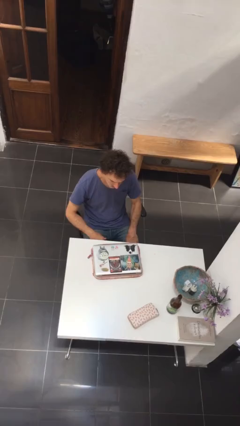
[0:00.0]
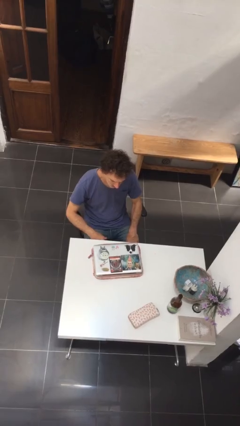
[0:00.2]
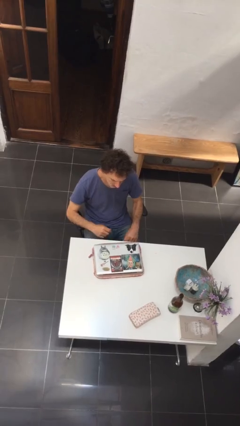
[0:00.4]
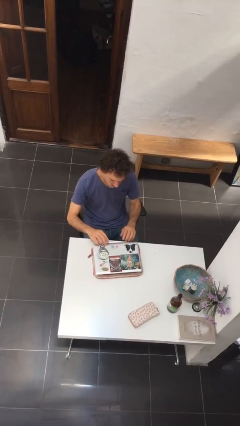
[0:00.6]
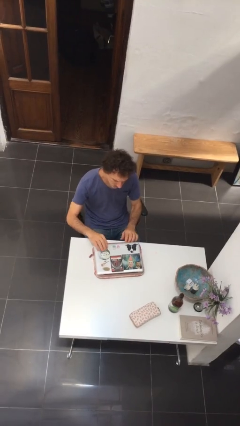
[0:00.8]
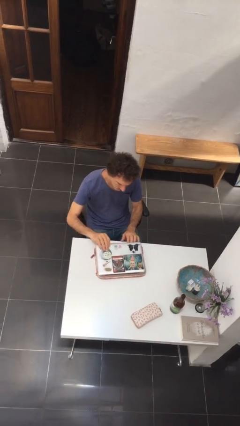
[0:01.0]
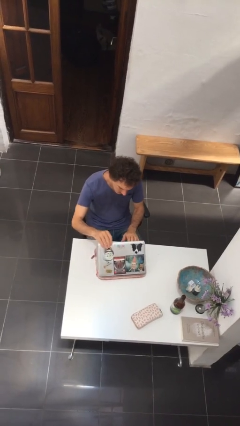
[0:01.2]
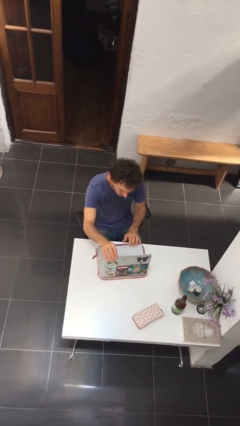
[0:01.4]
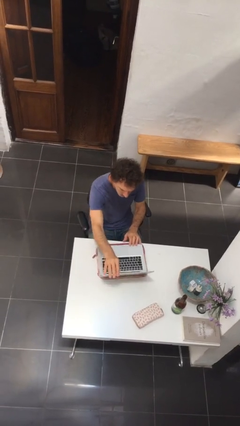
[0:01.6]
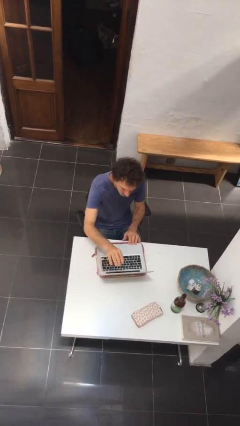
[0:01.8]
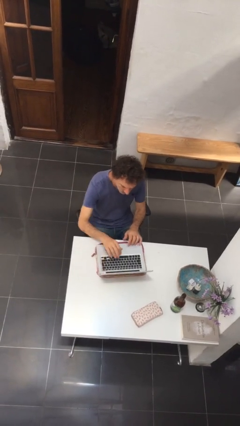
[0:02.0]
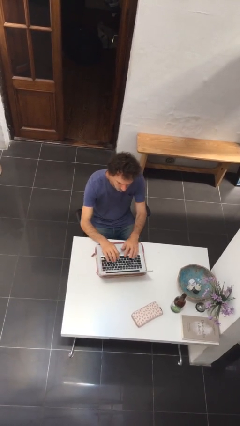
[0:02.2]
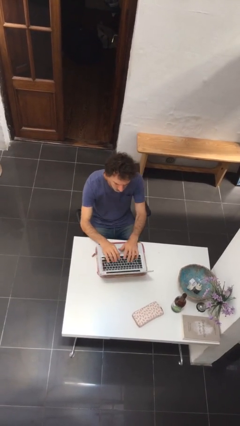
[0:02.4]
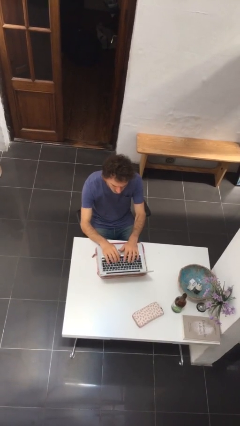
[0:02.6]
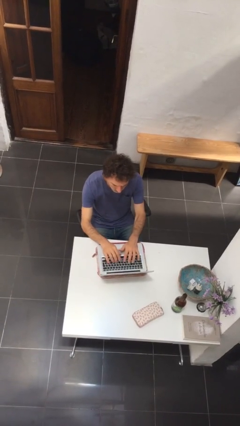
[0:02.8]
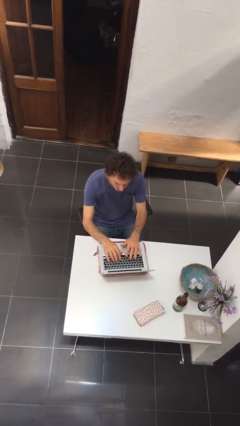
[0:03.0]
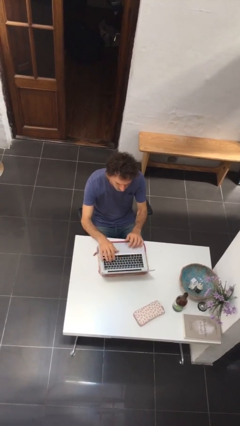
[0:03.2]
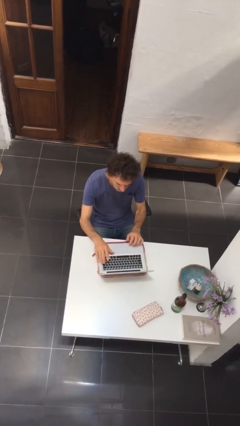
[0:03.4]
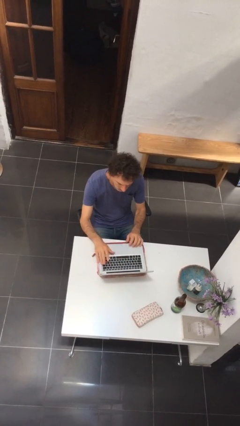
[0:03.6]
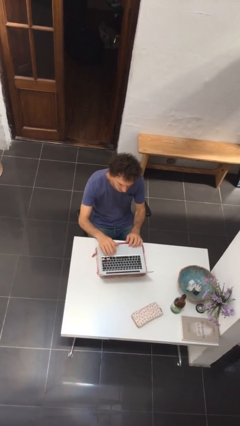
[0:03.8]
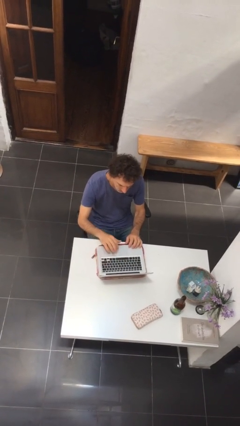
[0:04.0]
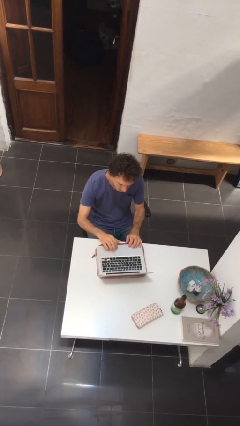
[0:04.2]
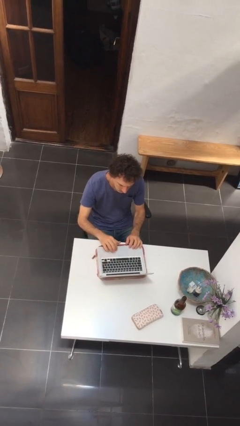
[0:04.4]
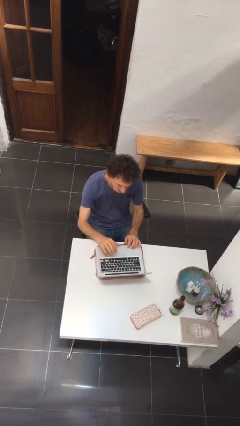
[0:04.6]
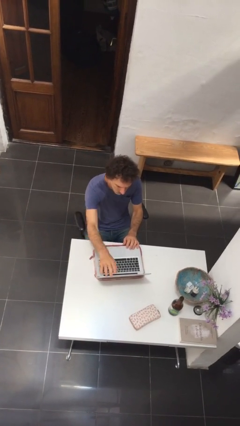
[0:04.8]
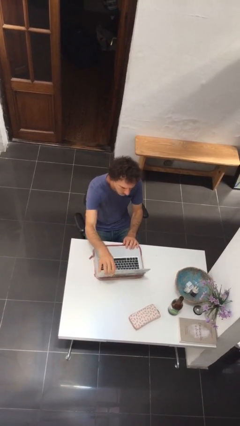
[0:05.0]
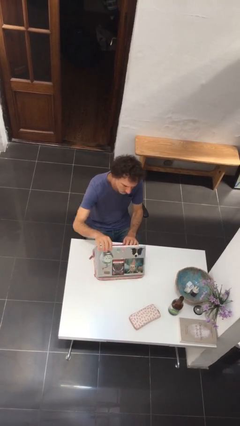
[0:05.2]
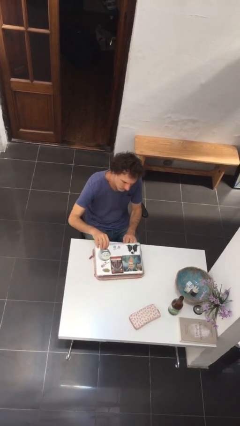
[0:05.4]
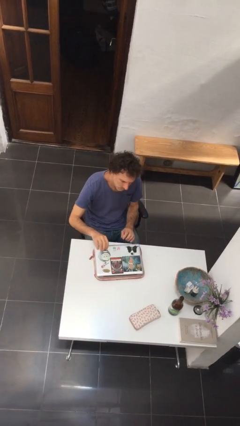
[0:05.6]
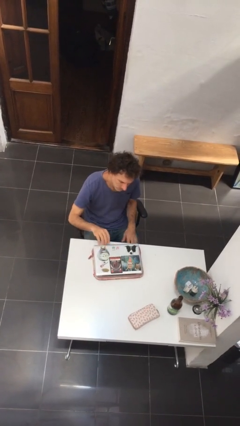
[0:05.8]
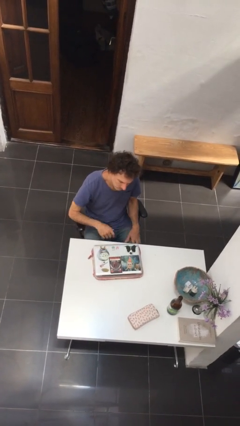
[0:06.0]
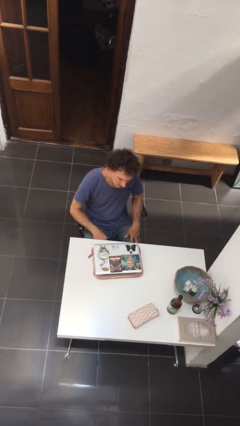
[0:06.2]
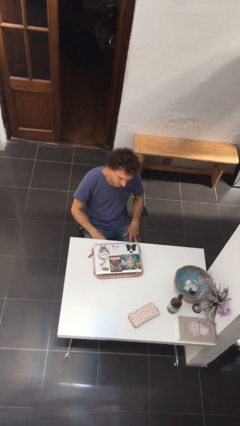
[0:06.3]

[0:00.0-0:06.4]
person interacts with laptop

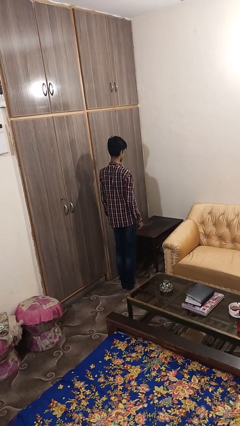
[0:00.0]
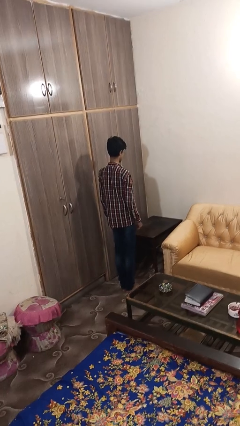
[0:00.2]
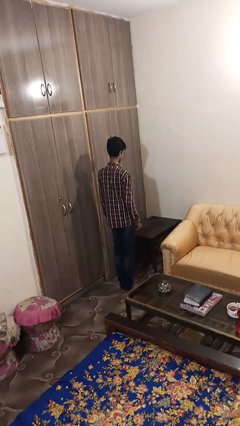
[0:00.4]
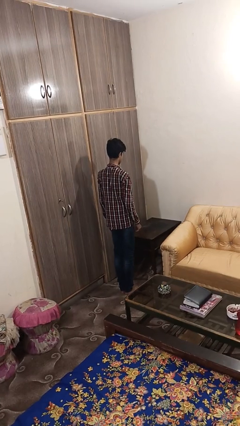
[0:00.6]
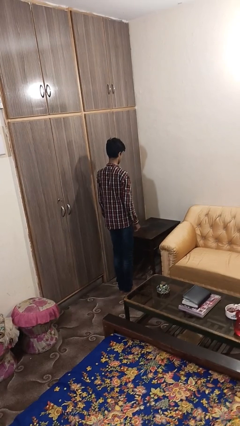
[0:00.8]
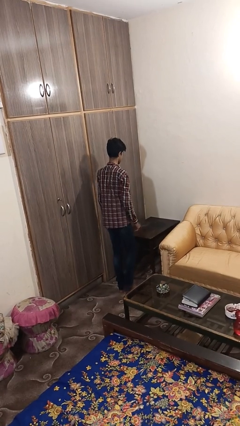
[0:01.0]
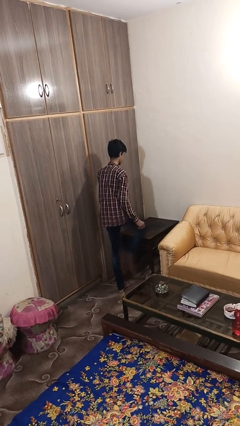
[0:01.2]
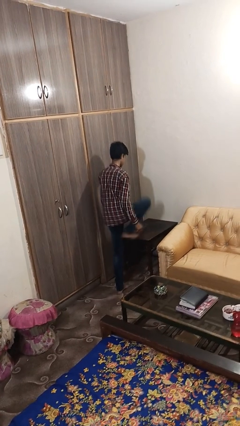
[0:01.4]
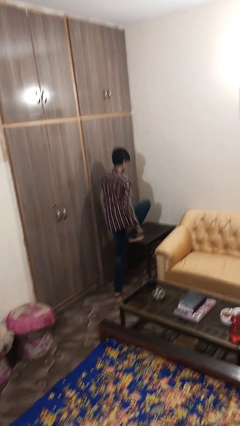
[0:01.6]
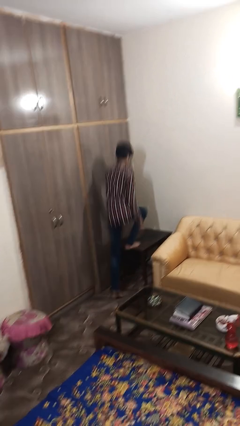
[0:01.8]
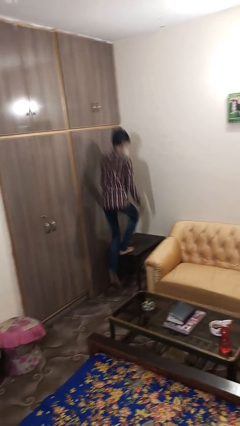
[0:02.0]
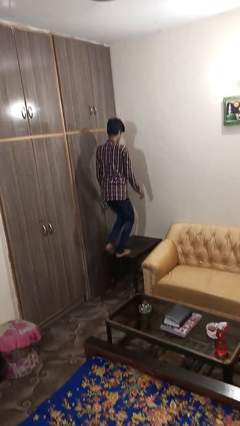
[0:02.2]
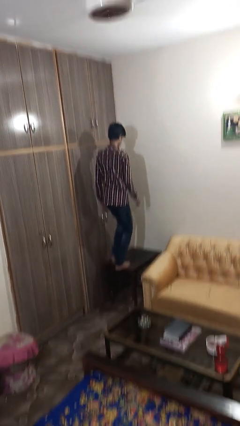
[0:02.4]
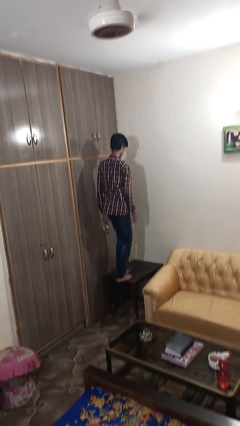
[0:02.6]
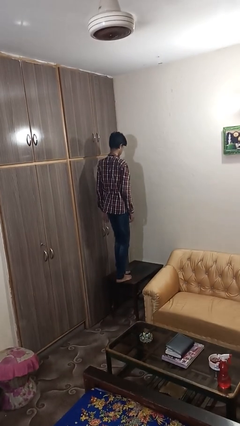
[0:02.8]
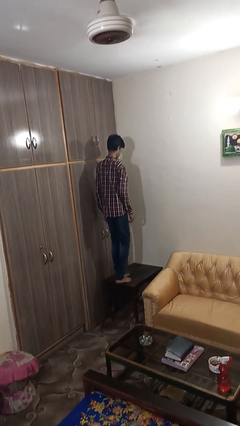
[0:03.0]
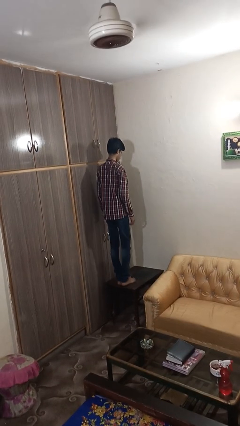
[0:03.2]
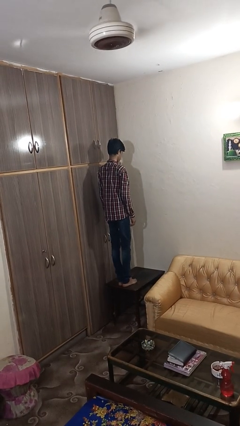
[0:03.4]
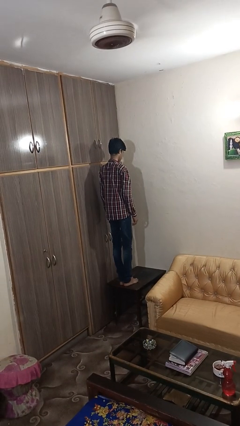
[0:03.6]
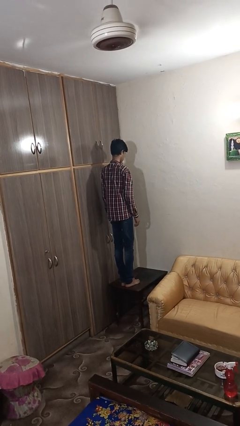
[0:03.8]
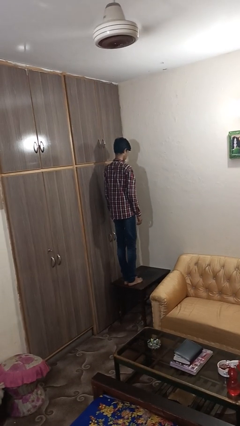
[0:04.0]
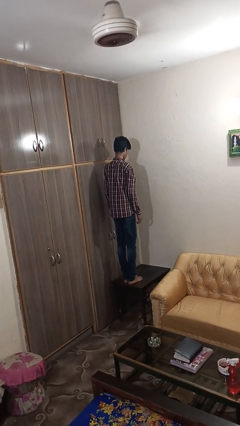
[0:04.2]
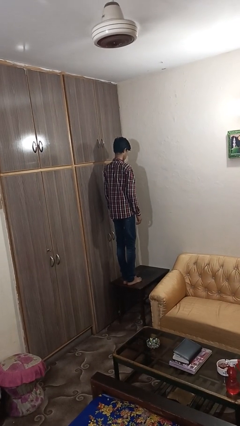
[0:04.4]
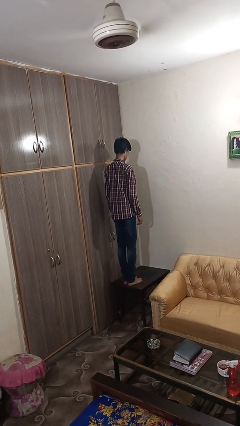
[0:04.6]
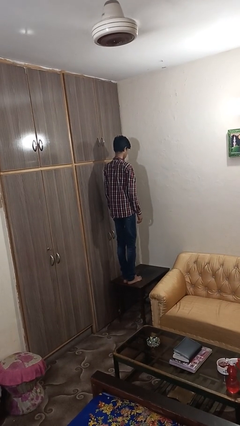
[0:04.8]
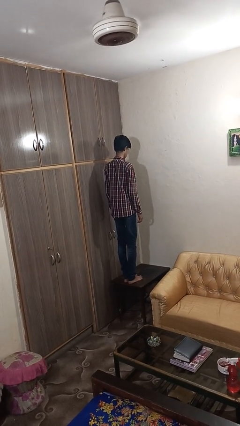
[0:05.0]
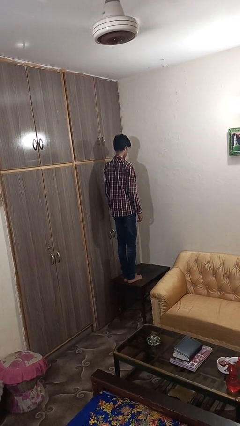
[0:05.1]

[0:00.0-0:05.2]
person climbs on table

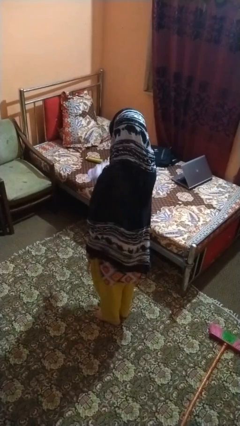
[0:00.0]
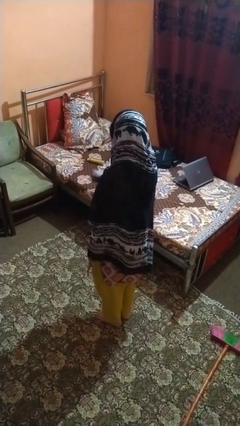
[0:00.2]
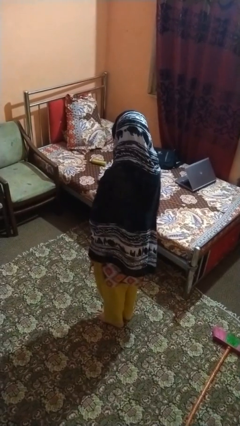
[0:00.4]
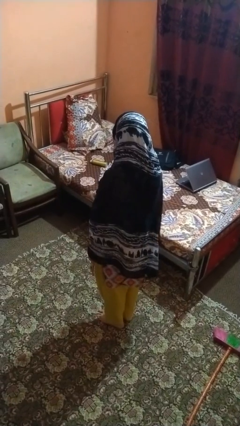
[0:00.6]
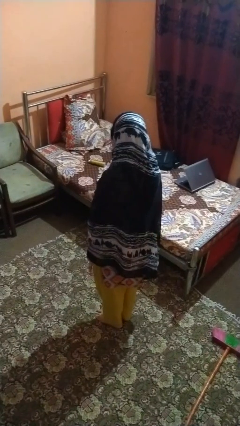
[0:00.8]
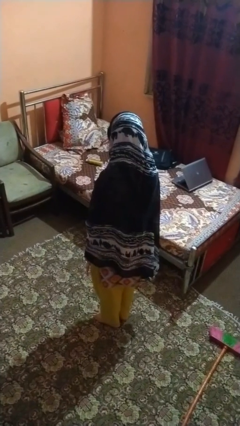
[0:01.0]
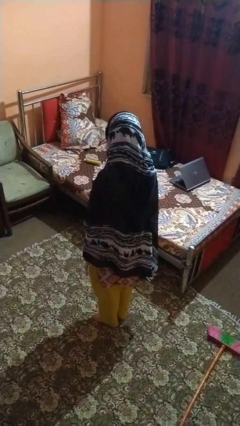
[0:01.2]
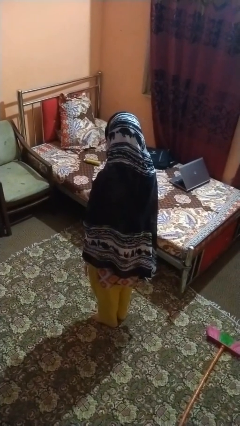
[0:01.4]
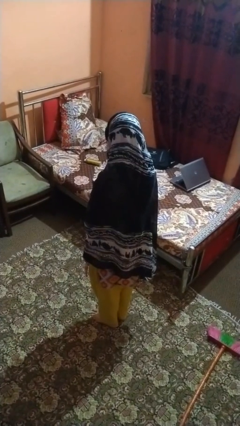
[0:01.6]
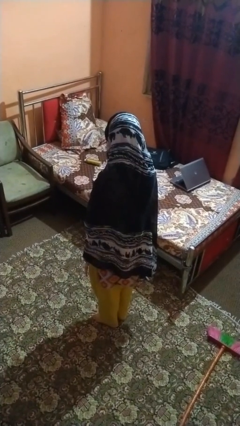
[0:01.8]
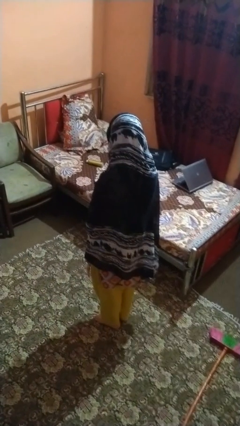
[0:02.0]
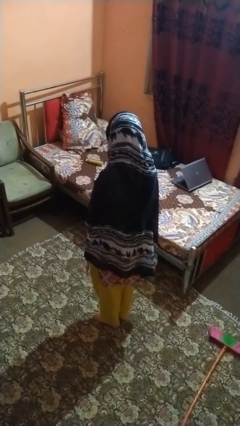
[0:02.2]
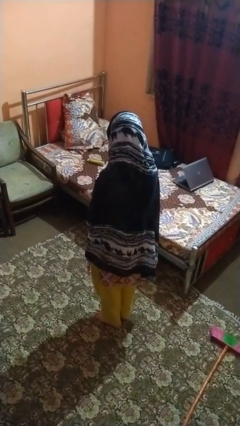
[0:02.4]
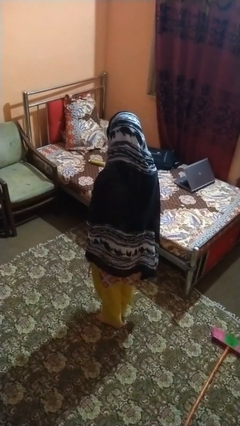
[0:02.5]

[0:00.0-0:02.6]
person throws object on bed

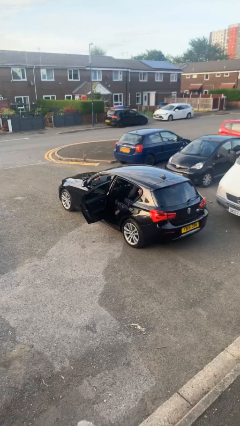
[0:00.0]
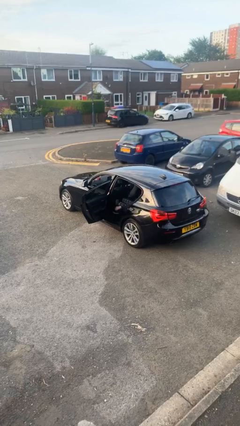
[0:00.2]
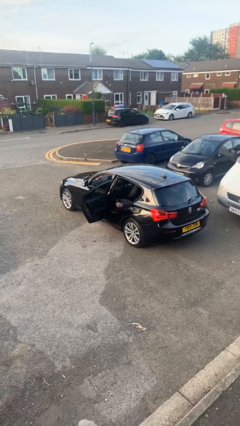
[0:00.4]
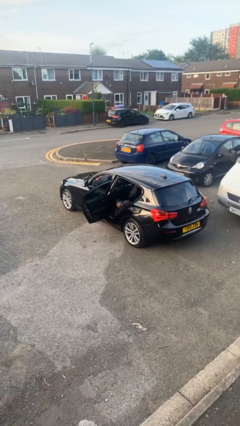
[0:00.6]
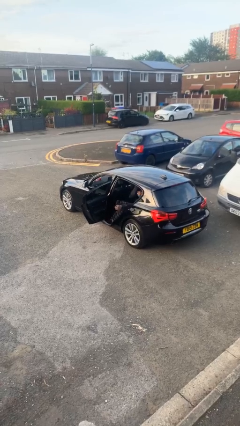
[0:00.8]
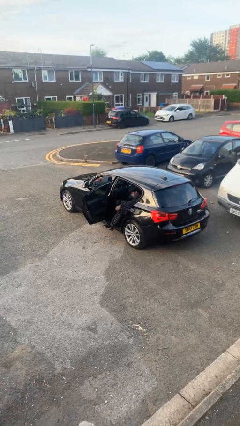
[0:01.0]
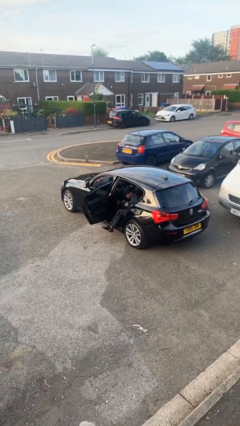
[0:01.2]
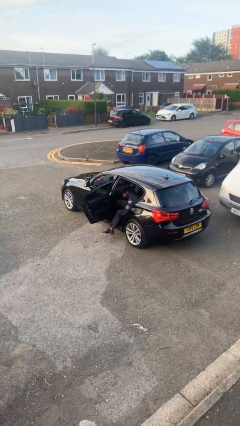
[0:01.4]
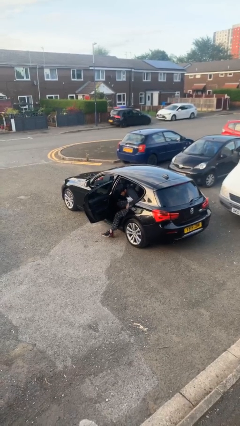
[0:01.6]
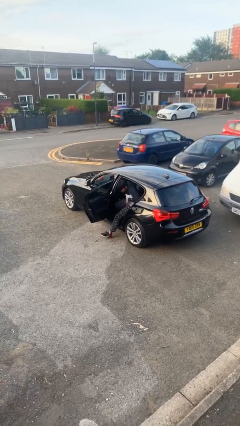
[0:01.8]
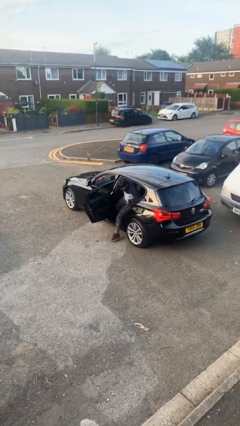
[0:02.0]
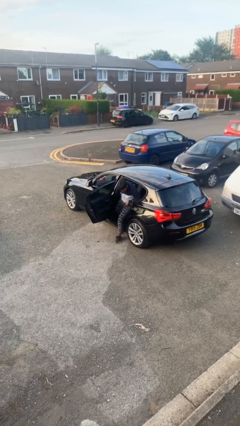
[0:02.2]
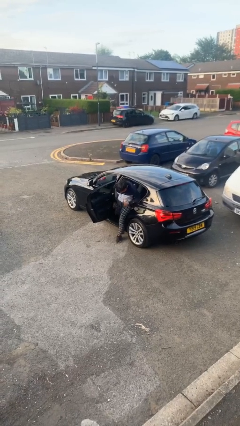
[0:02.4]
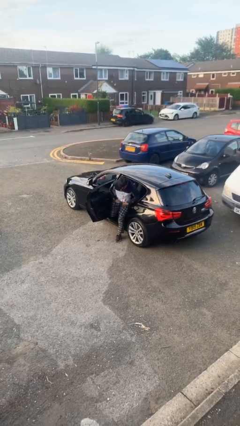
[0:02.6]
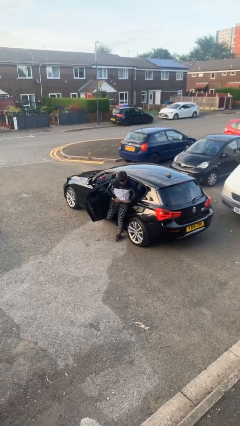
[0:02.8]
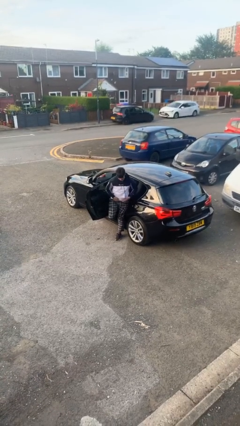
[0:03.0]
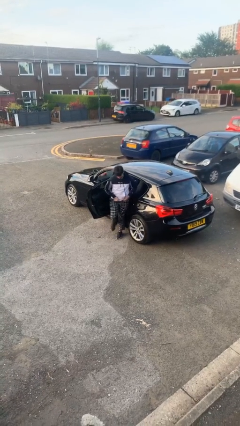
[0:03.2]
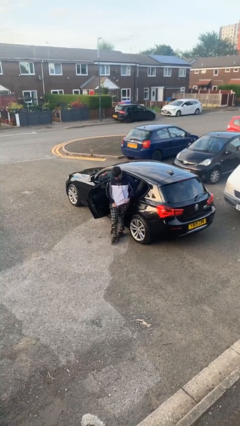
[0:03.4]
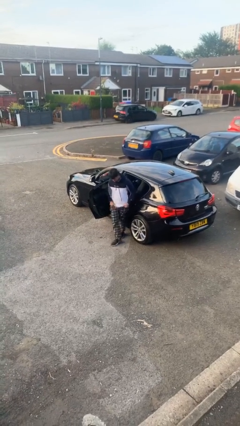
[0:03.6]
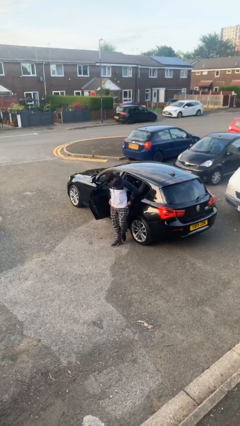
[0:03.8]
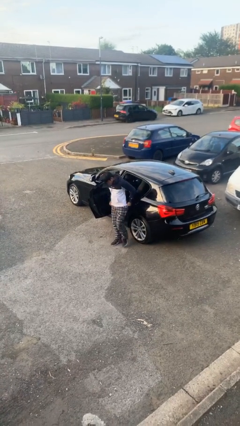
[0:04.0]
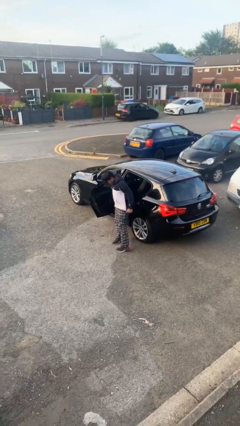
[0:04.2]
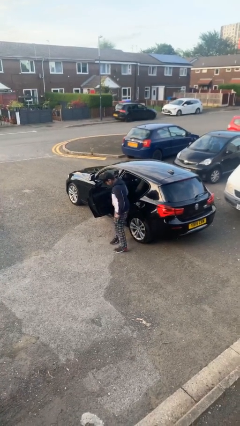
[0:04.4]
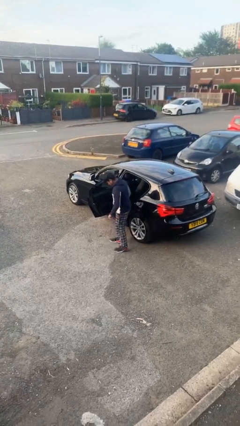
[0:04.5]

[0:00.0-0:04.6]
person exits car
